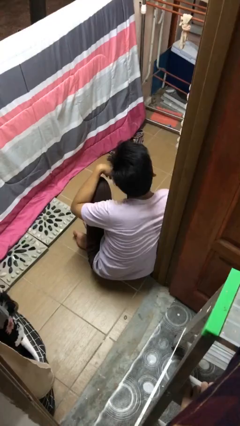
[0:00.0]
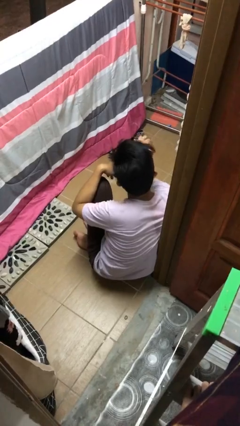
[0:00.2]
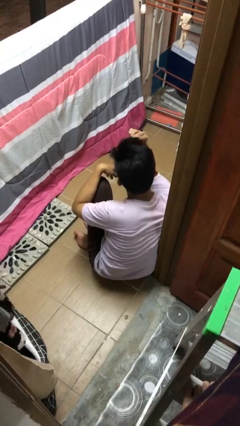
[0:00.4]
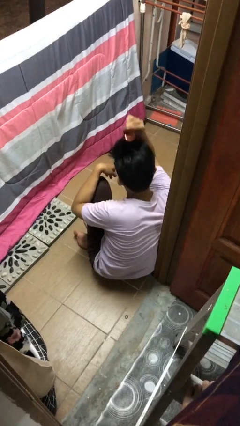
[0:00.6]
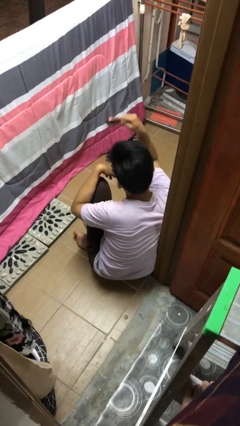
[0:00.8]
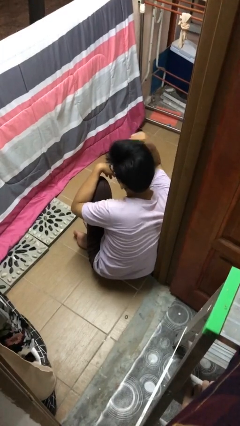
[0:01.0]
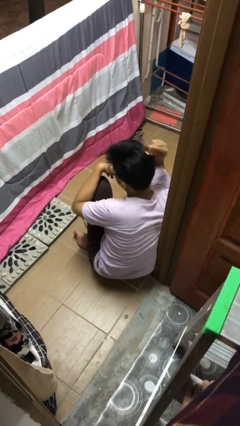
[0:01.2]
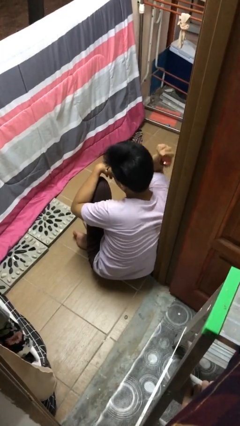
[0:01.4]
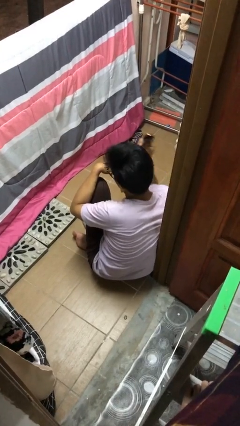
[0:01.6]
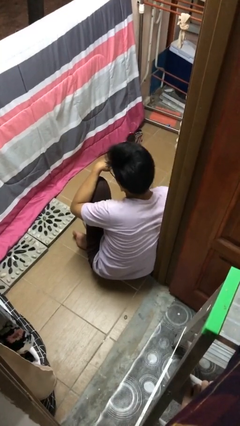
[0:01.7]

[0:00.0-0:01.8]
person brushes hair

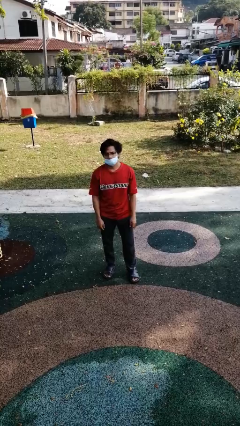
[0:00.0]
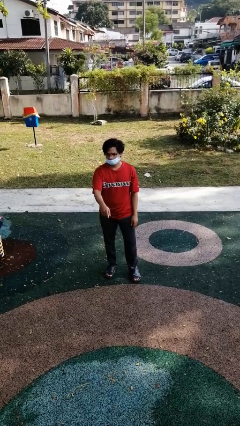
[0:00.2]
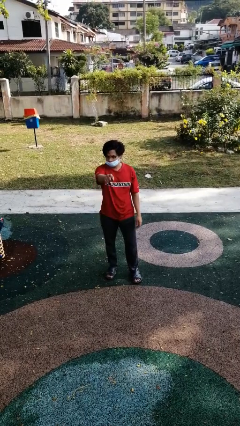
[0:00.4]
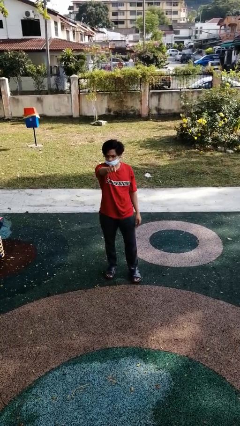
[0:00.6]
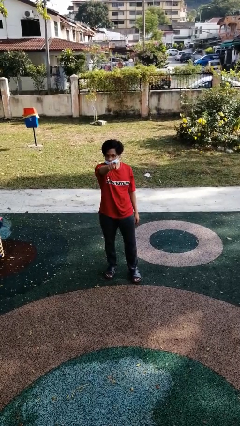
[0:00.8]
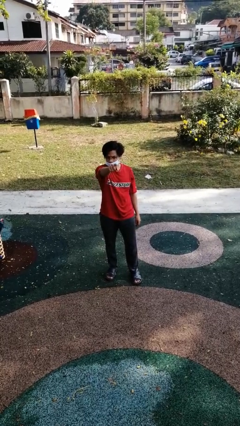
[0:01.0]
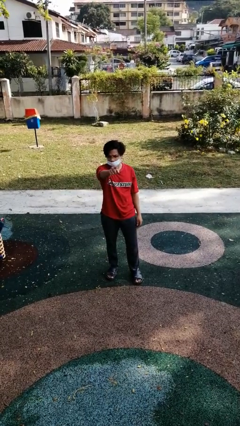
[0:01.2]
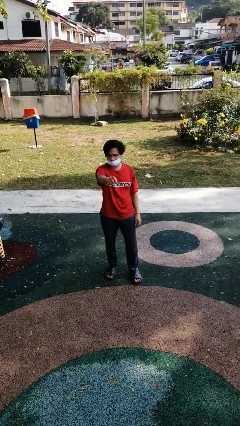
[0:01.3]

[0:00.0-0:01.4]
person points at person

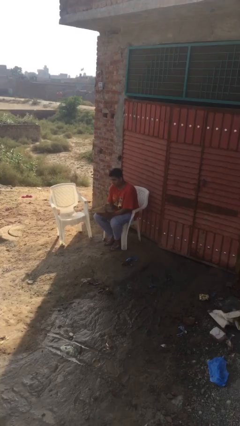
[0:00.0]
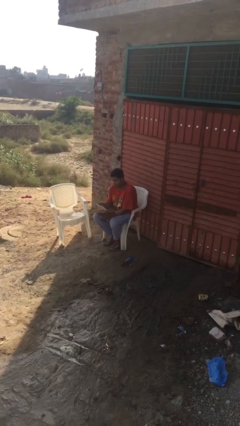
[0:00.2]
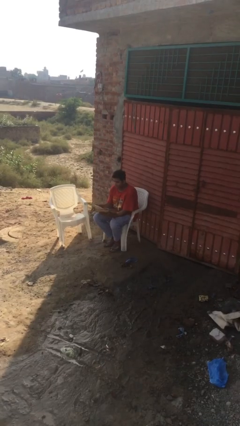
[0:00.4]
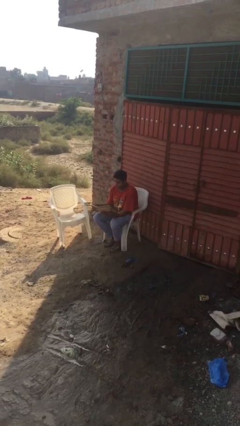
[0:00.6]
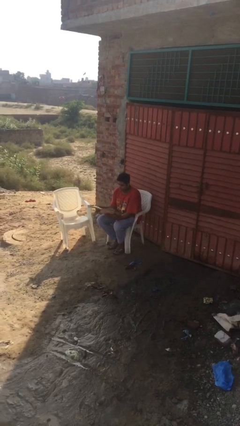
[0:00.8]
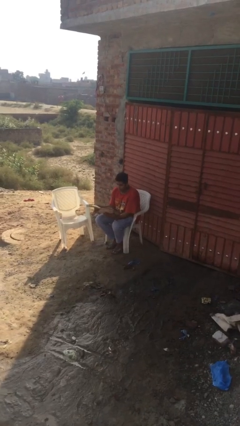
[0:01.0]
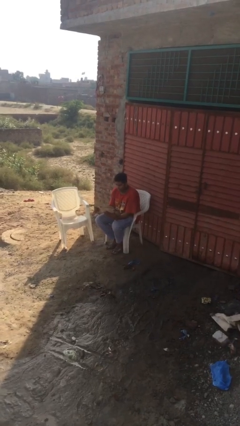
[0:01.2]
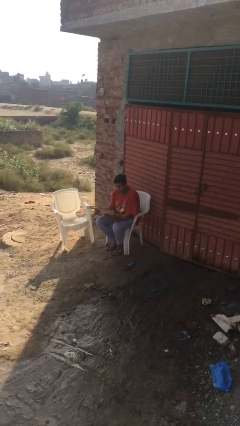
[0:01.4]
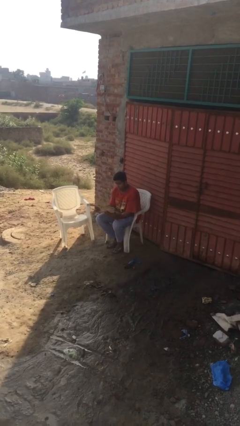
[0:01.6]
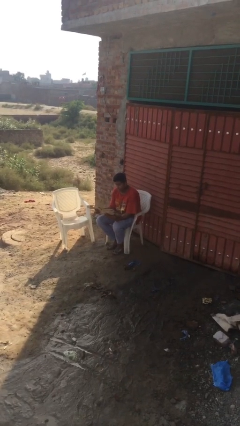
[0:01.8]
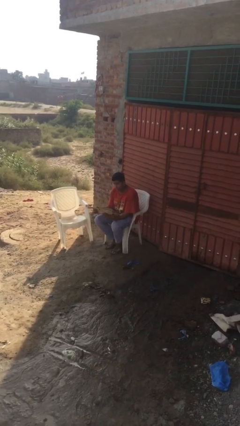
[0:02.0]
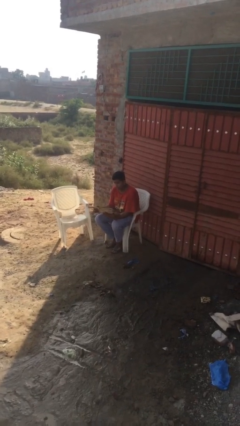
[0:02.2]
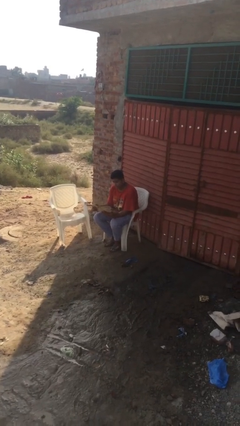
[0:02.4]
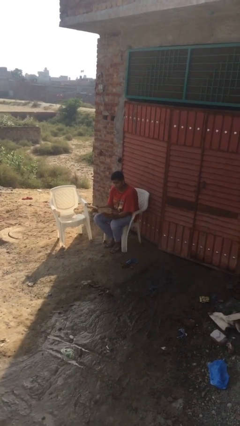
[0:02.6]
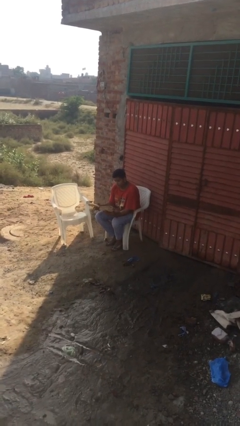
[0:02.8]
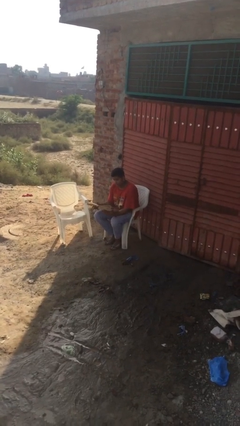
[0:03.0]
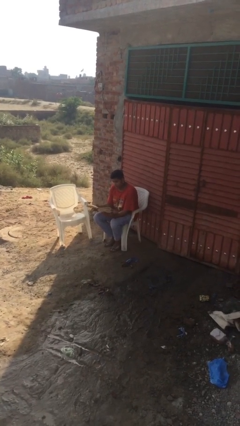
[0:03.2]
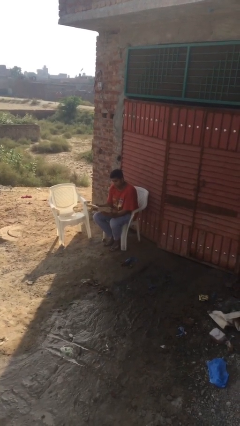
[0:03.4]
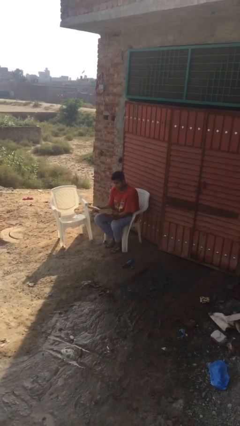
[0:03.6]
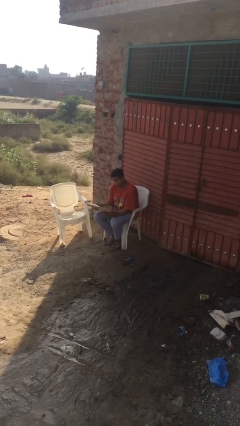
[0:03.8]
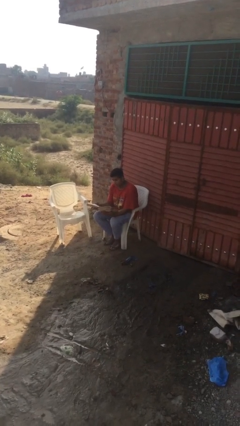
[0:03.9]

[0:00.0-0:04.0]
person reads document

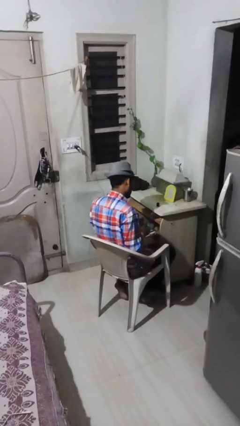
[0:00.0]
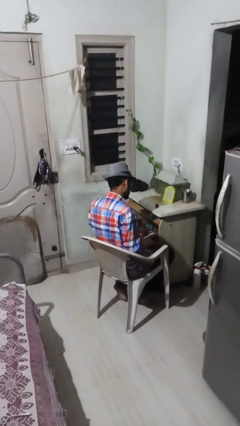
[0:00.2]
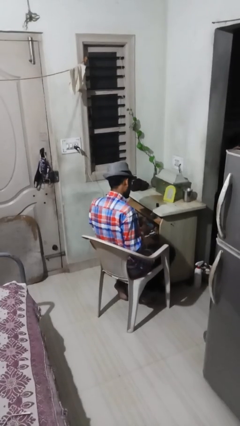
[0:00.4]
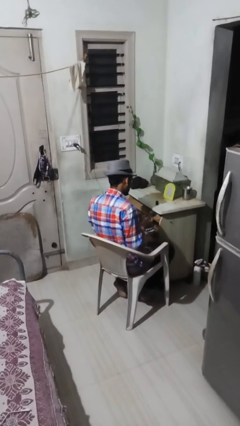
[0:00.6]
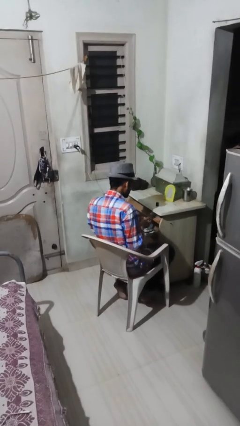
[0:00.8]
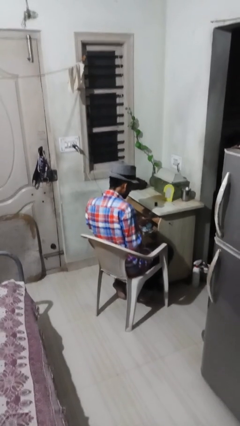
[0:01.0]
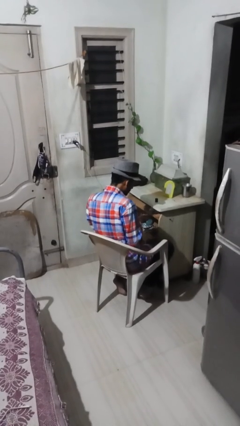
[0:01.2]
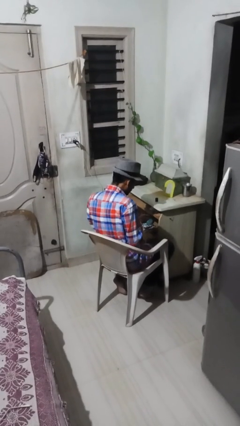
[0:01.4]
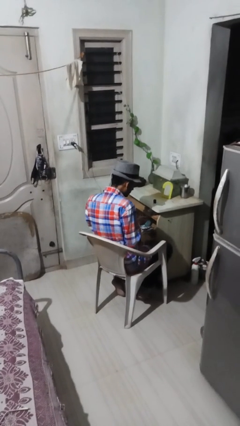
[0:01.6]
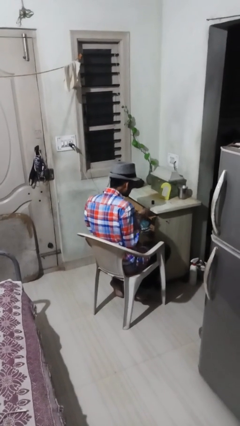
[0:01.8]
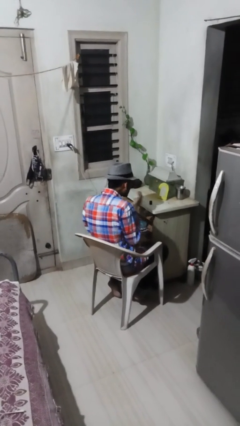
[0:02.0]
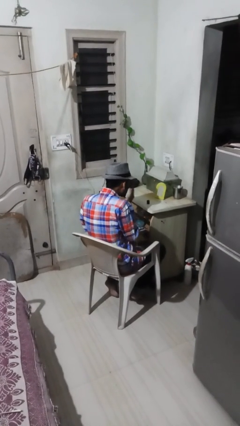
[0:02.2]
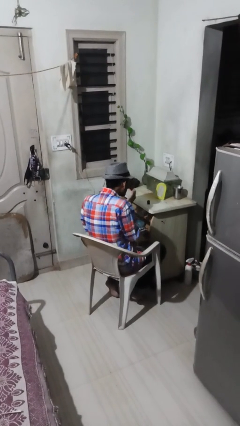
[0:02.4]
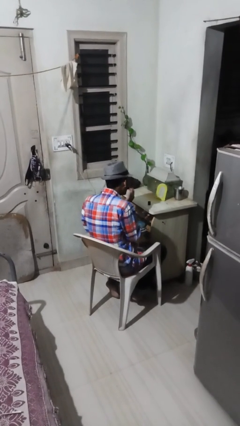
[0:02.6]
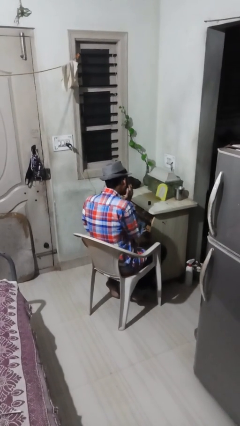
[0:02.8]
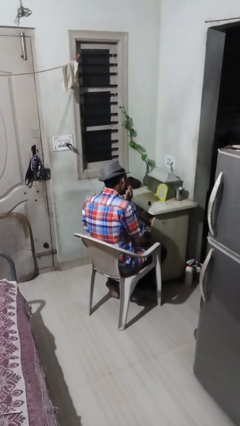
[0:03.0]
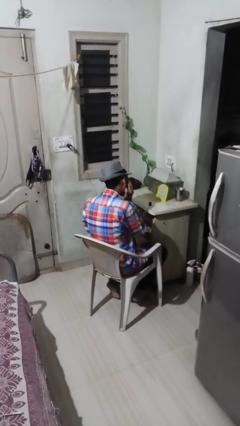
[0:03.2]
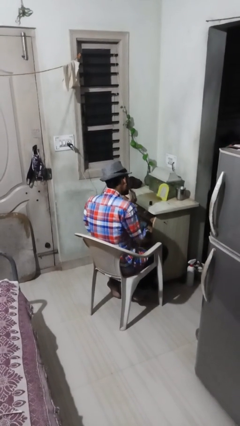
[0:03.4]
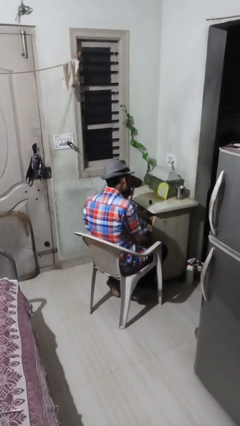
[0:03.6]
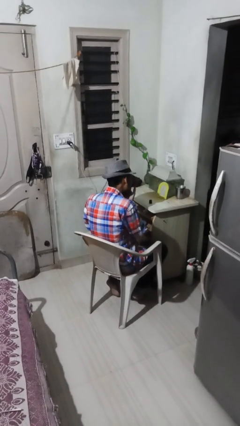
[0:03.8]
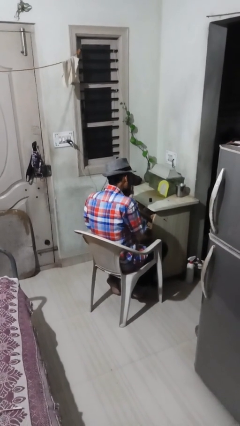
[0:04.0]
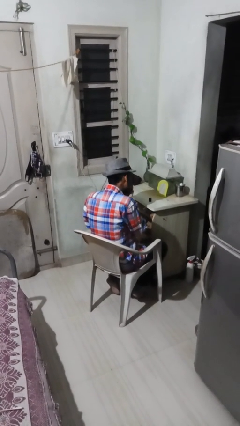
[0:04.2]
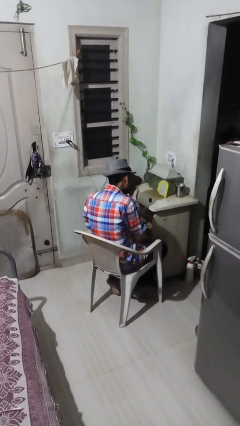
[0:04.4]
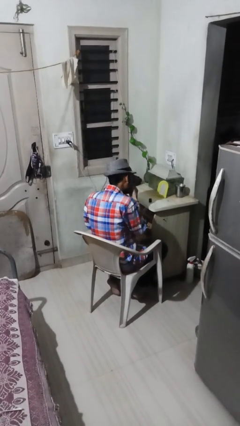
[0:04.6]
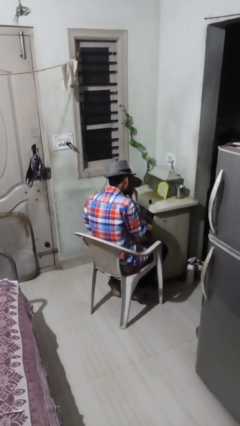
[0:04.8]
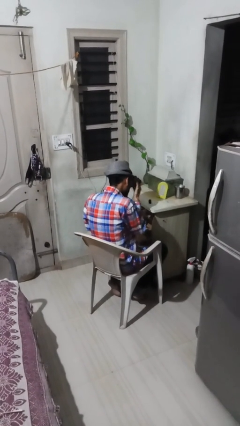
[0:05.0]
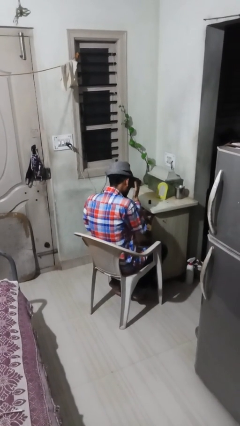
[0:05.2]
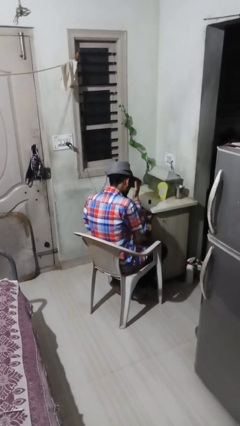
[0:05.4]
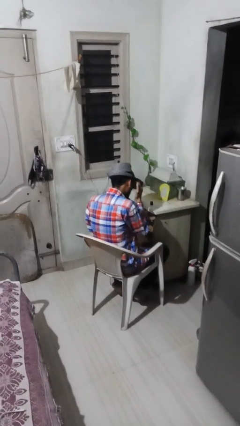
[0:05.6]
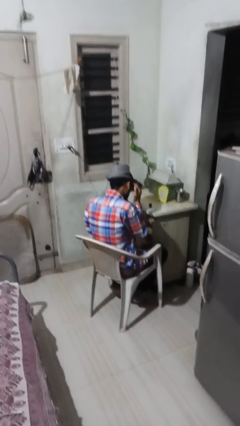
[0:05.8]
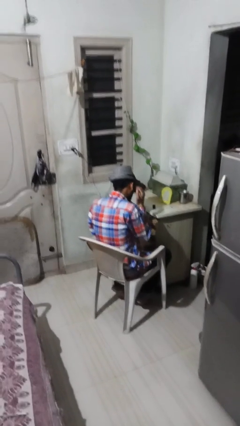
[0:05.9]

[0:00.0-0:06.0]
person applies foundation makeup

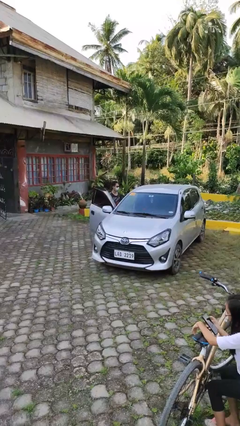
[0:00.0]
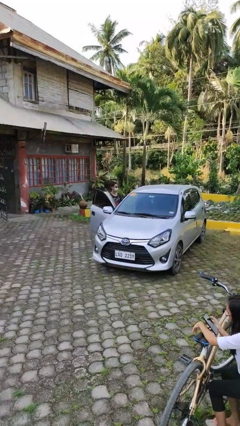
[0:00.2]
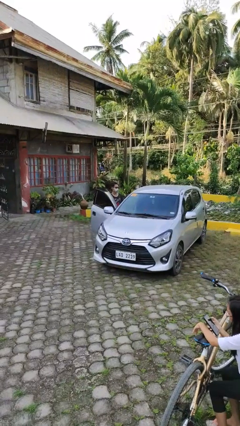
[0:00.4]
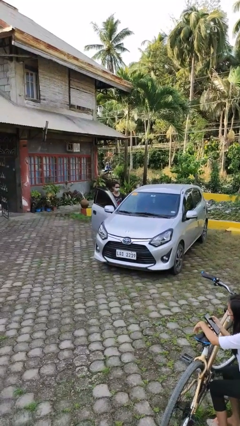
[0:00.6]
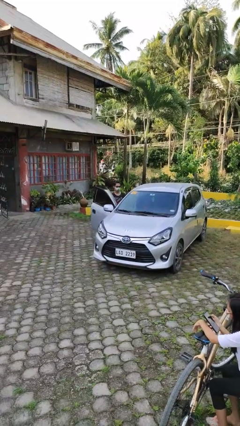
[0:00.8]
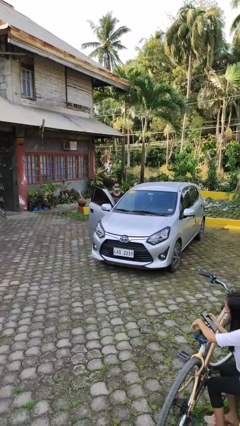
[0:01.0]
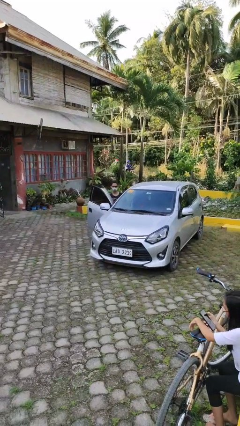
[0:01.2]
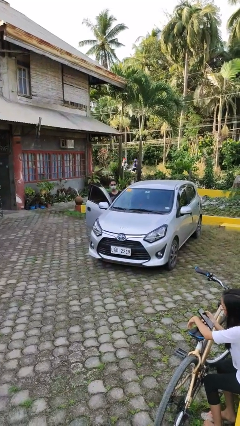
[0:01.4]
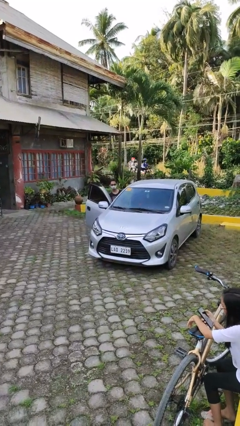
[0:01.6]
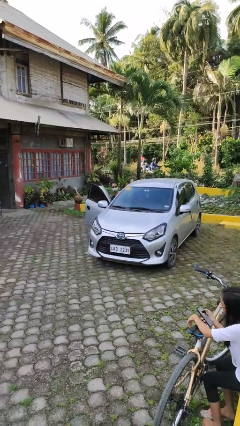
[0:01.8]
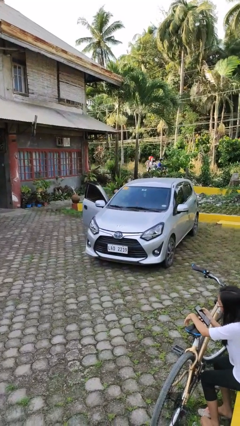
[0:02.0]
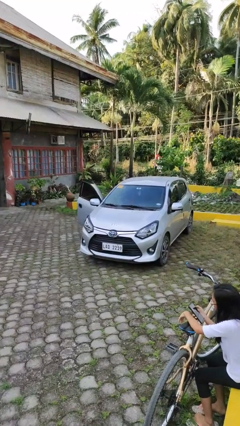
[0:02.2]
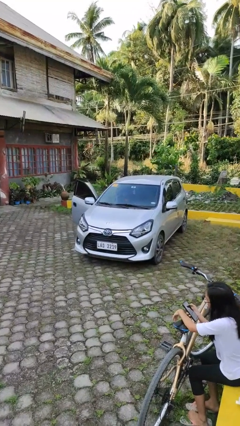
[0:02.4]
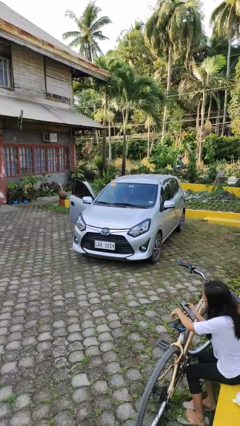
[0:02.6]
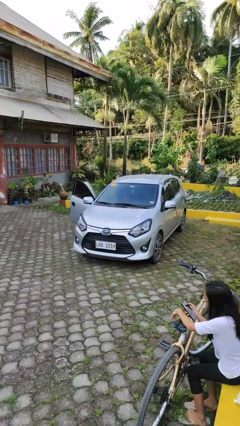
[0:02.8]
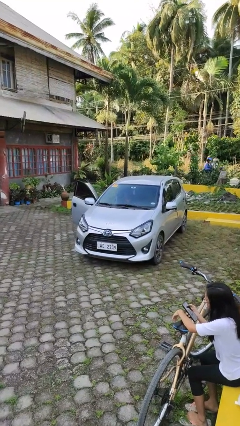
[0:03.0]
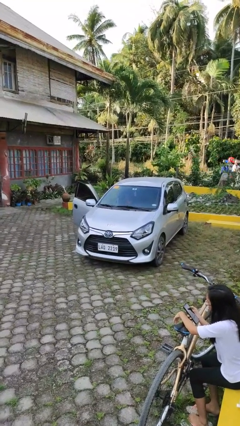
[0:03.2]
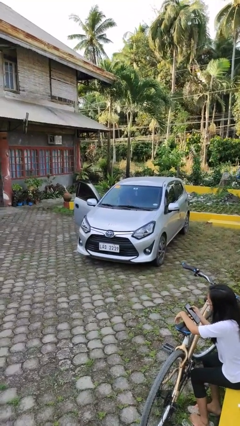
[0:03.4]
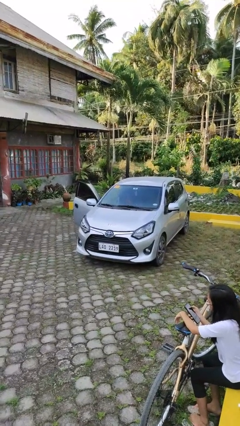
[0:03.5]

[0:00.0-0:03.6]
person enters car

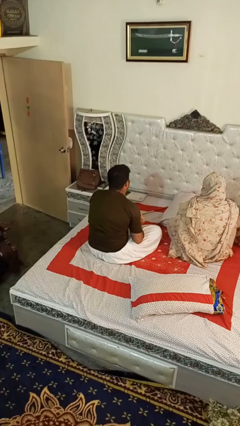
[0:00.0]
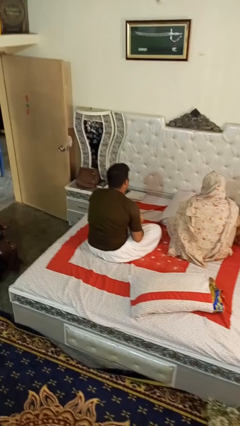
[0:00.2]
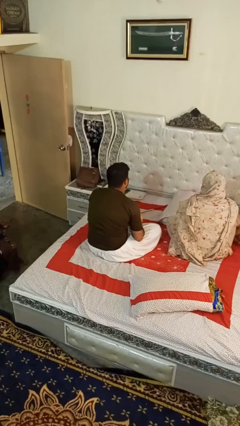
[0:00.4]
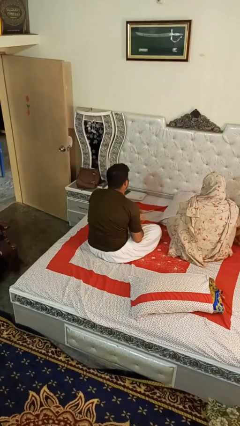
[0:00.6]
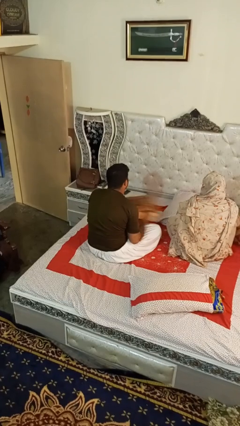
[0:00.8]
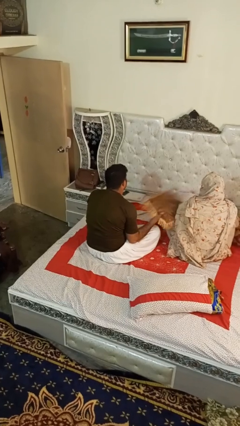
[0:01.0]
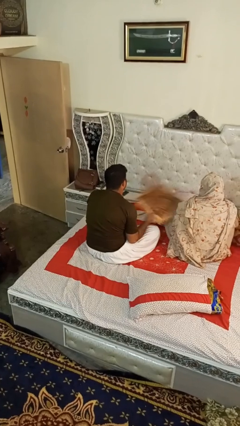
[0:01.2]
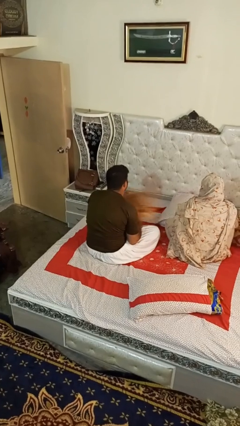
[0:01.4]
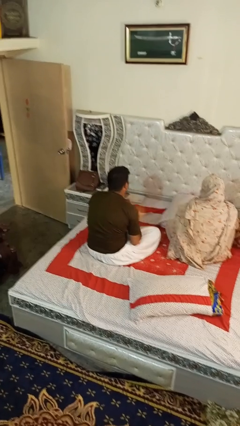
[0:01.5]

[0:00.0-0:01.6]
person hits person with pillow
